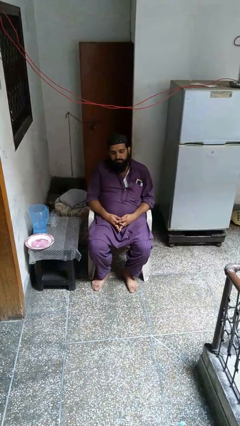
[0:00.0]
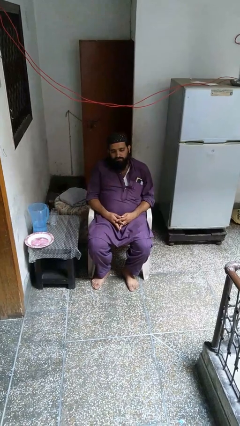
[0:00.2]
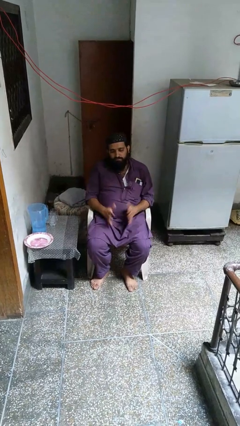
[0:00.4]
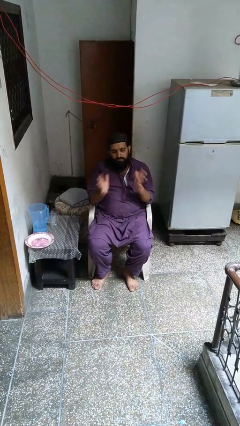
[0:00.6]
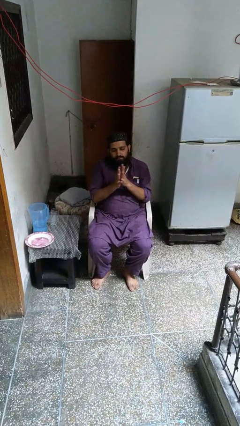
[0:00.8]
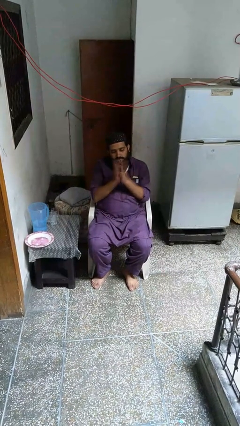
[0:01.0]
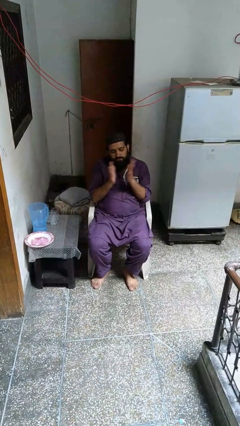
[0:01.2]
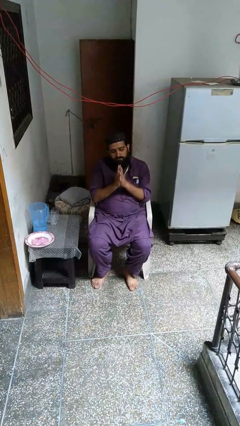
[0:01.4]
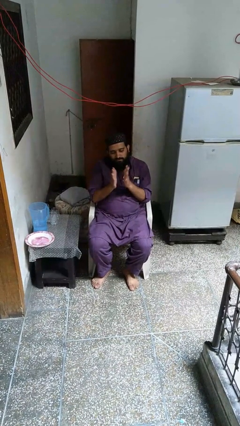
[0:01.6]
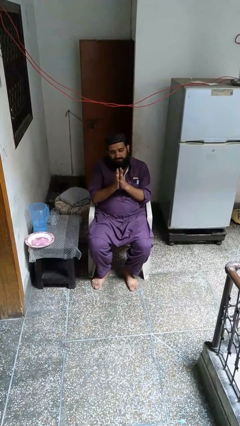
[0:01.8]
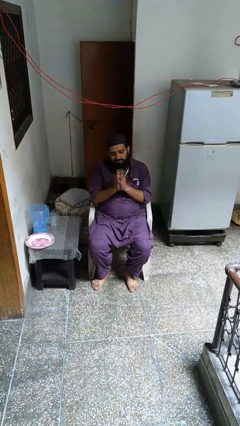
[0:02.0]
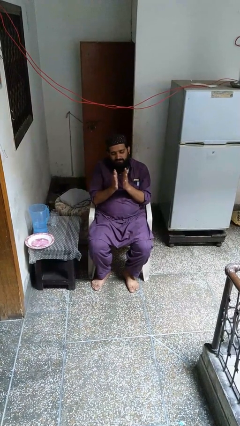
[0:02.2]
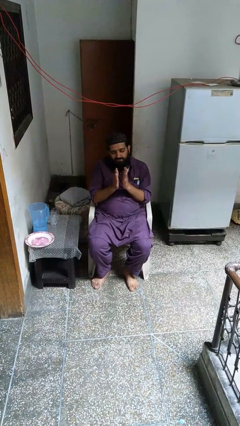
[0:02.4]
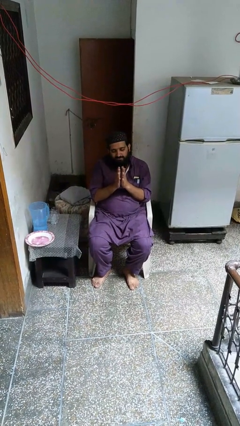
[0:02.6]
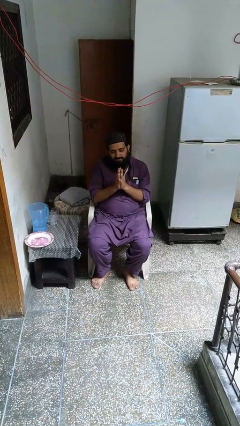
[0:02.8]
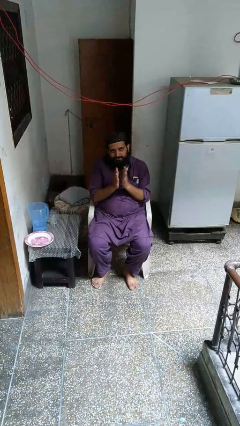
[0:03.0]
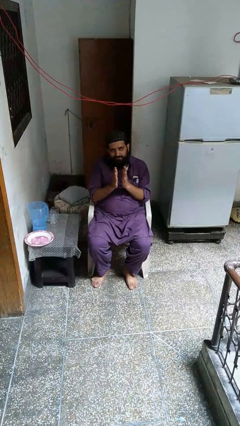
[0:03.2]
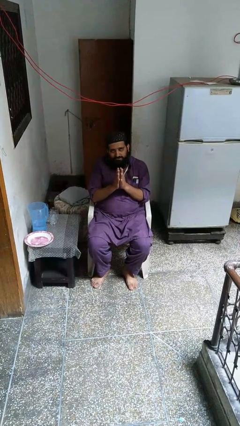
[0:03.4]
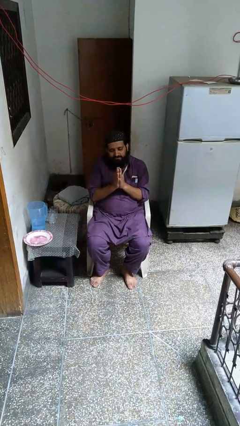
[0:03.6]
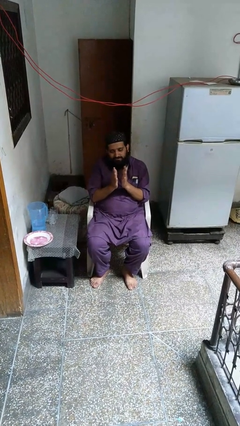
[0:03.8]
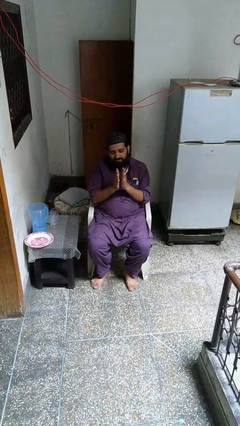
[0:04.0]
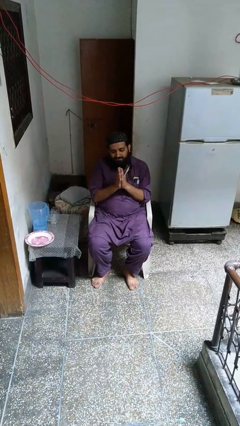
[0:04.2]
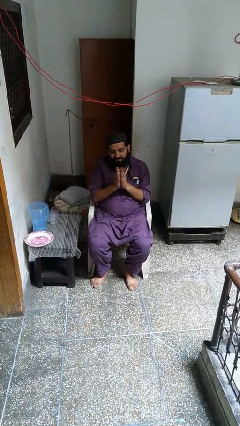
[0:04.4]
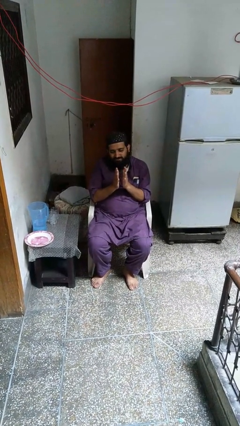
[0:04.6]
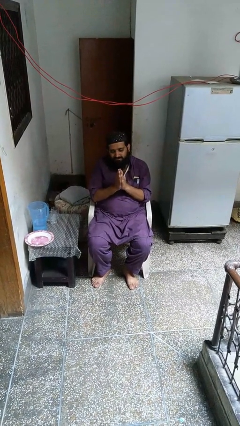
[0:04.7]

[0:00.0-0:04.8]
person claps hands

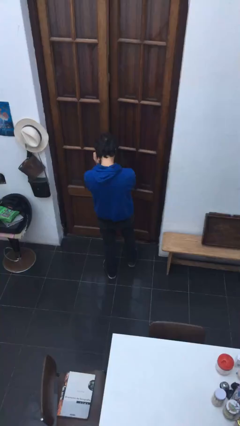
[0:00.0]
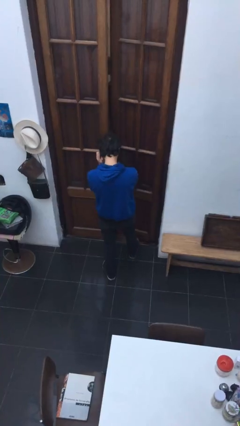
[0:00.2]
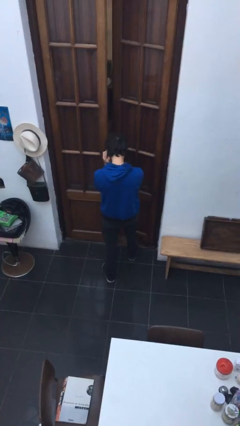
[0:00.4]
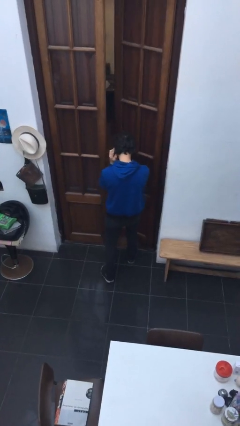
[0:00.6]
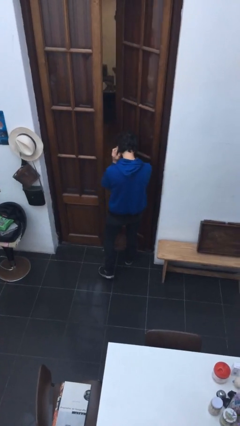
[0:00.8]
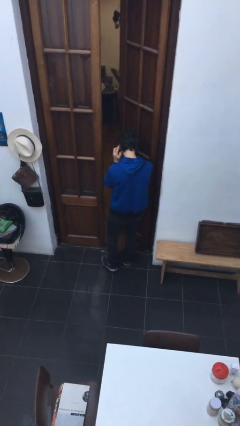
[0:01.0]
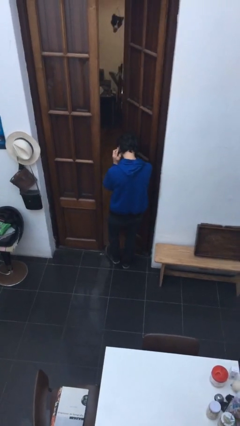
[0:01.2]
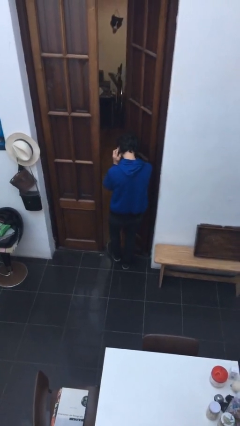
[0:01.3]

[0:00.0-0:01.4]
person opens facility door

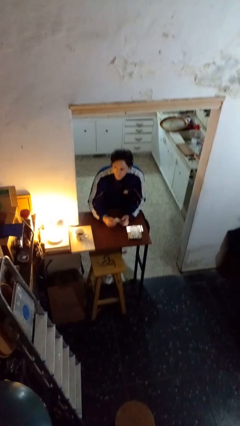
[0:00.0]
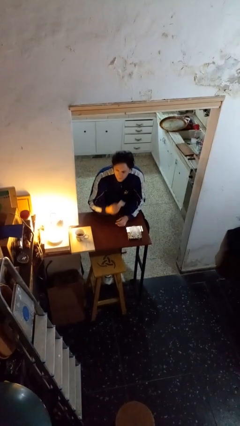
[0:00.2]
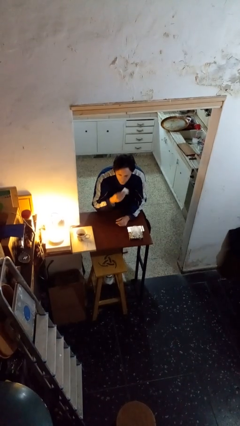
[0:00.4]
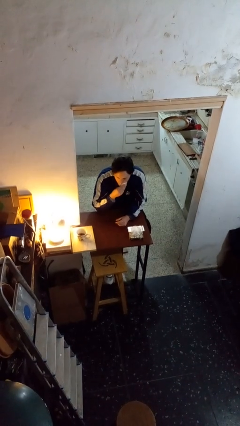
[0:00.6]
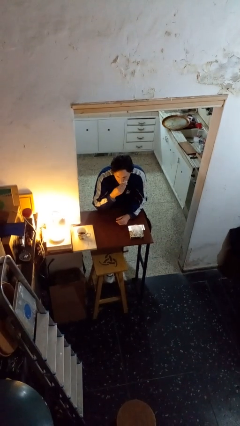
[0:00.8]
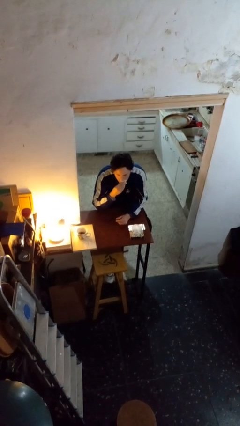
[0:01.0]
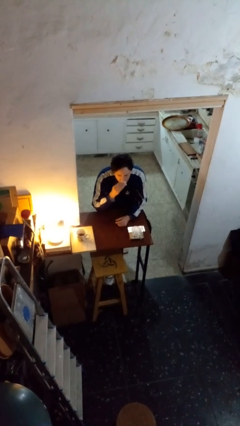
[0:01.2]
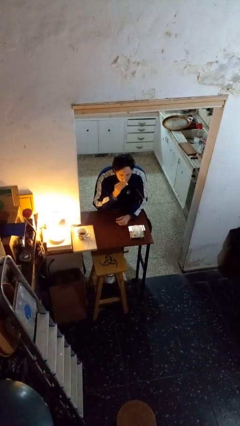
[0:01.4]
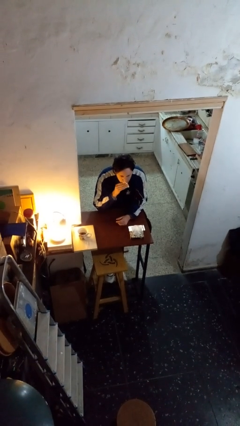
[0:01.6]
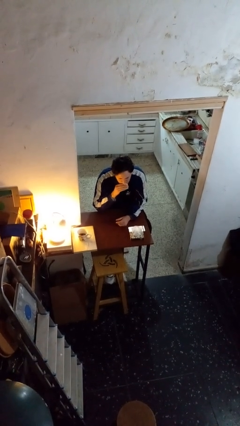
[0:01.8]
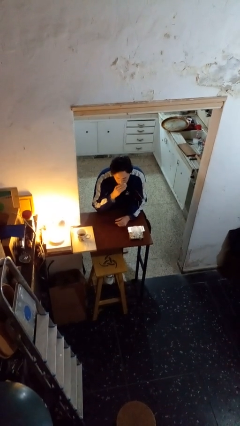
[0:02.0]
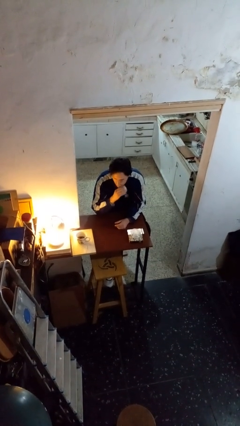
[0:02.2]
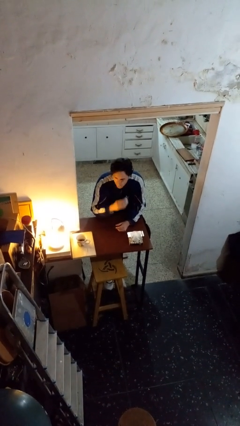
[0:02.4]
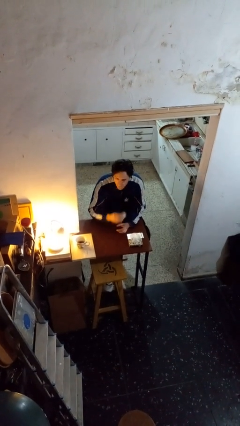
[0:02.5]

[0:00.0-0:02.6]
person wipes mouth with napkin

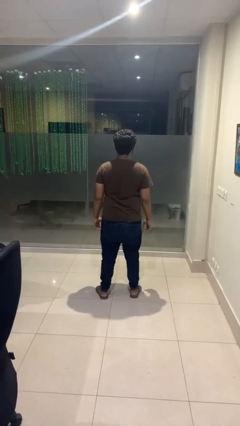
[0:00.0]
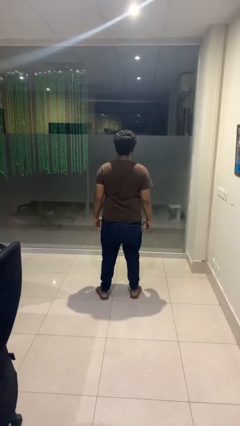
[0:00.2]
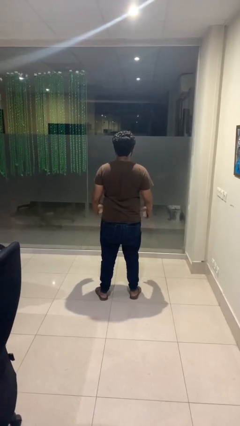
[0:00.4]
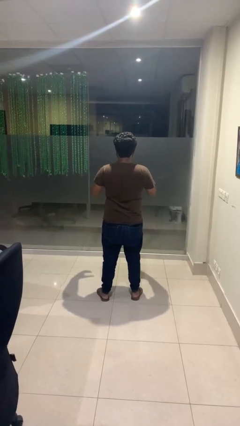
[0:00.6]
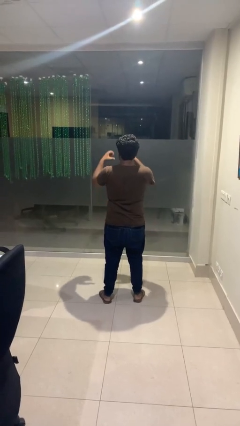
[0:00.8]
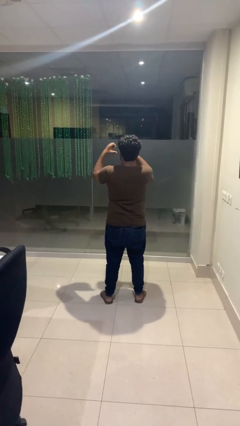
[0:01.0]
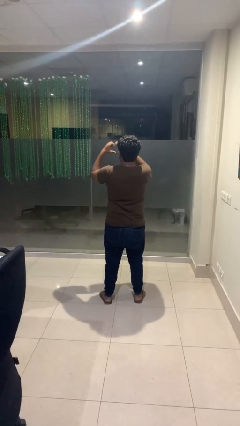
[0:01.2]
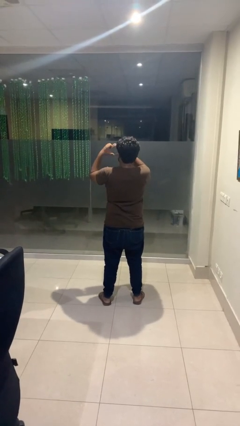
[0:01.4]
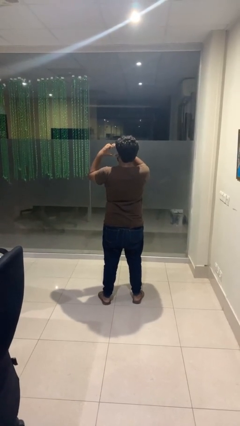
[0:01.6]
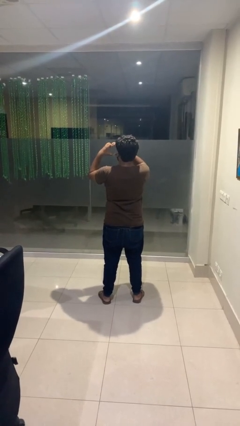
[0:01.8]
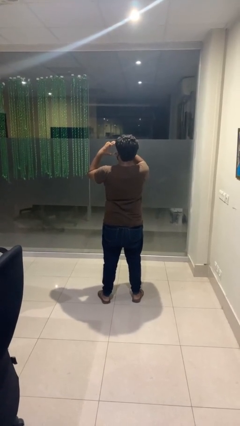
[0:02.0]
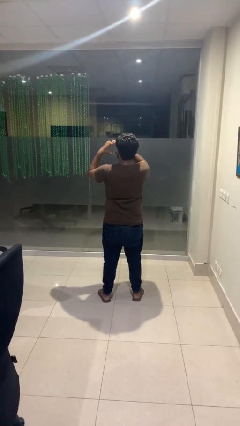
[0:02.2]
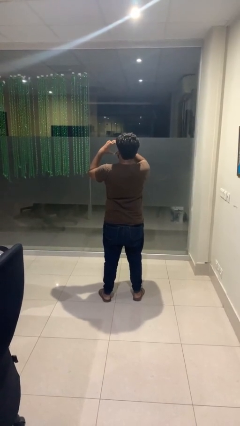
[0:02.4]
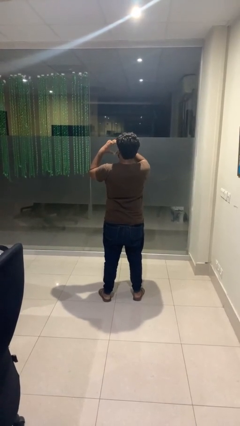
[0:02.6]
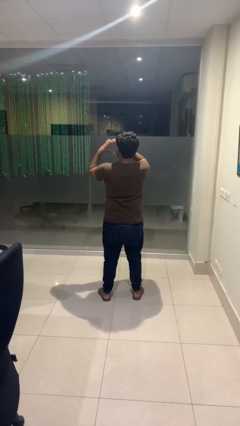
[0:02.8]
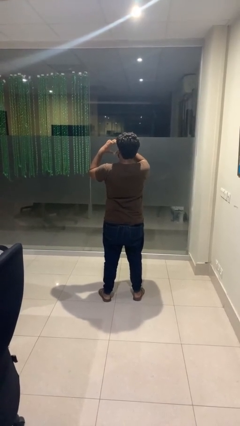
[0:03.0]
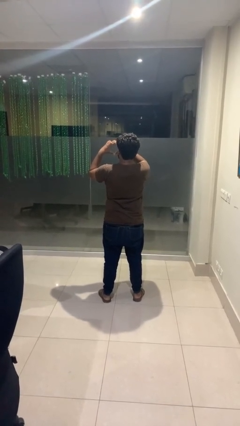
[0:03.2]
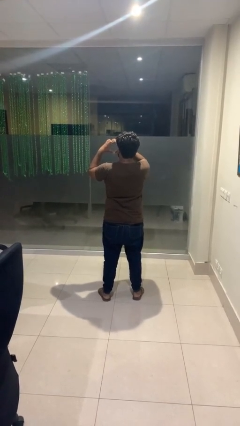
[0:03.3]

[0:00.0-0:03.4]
person gestures heart

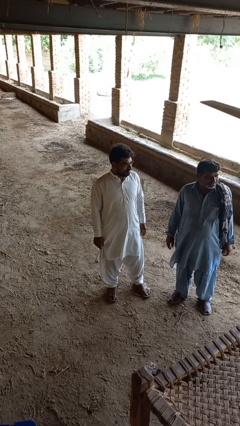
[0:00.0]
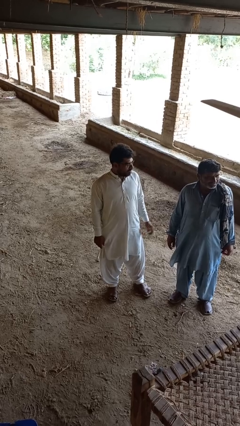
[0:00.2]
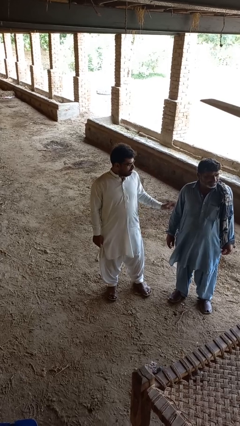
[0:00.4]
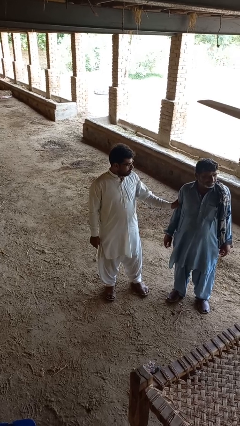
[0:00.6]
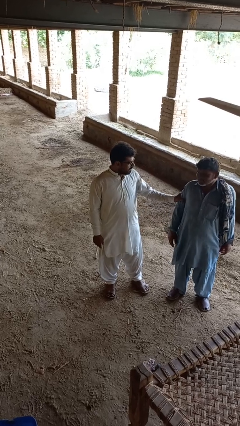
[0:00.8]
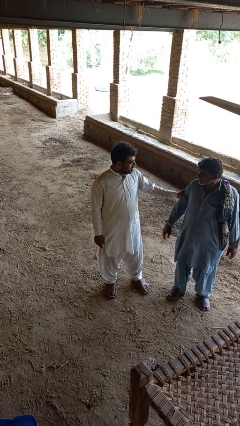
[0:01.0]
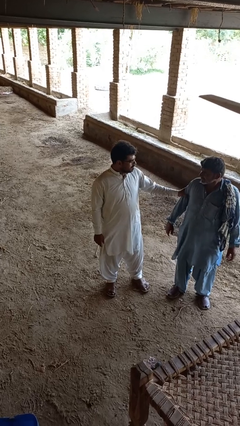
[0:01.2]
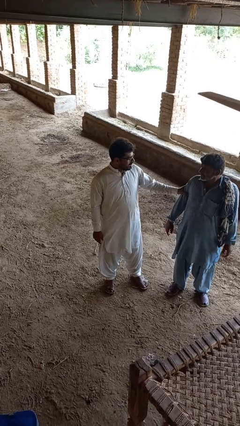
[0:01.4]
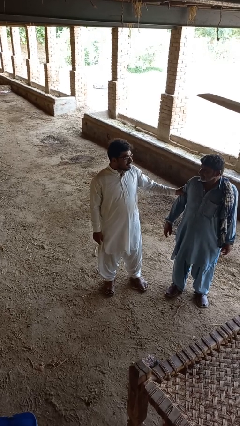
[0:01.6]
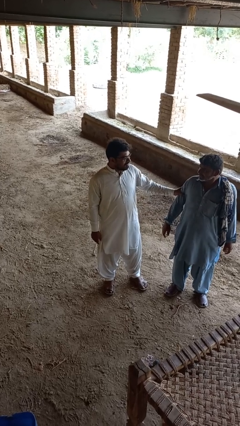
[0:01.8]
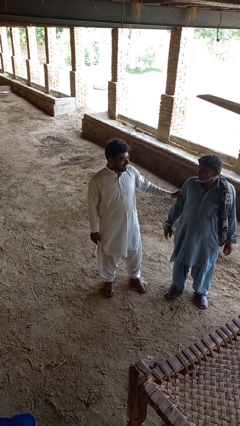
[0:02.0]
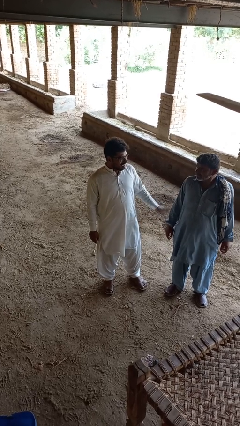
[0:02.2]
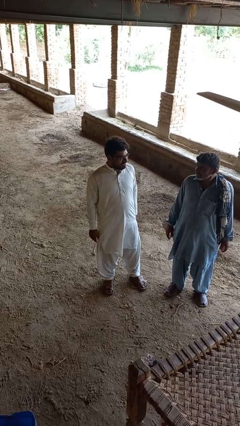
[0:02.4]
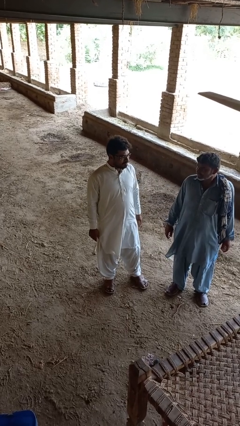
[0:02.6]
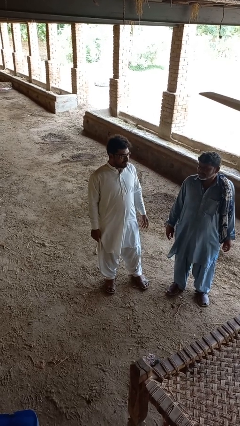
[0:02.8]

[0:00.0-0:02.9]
person grabs person by bicep

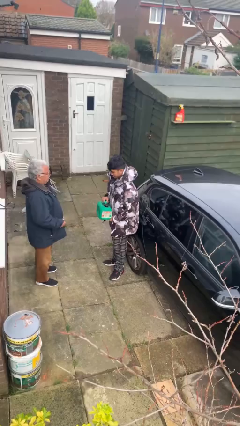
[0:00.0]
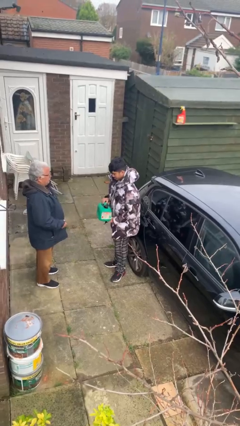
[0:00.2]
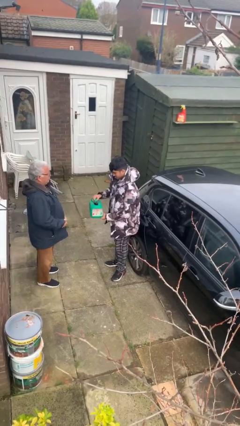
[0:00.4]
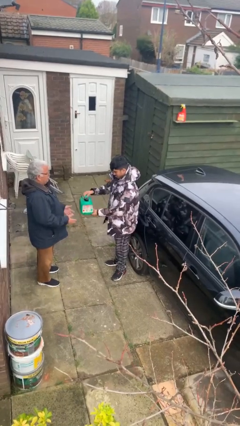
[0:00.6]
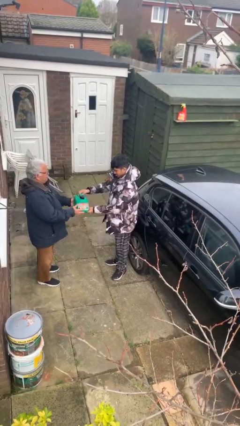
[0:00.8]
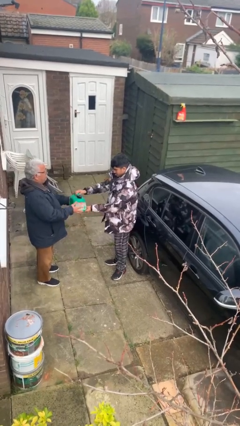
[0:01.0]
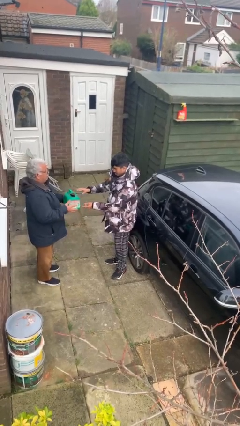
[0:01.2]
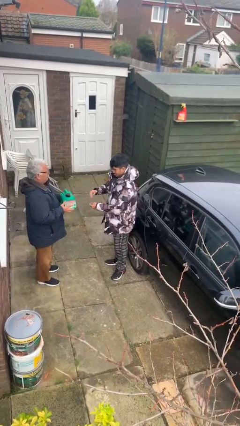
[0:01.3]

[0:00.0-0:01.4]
person transfers object to person

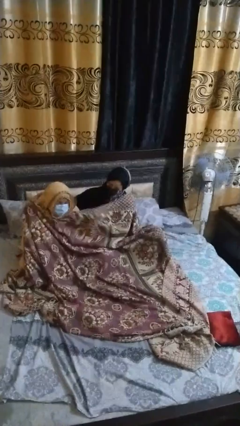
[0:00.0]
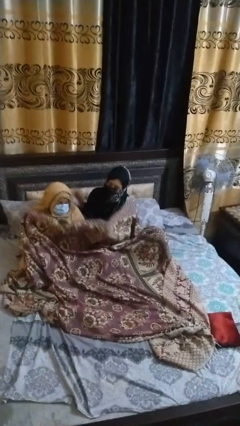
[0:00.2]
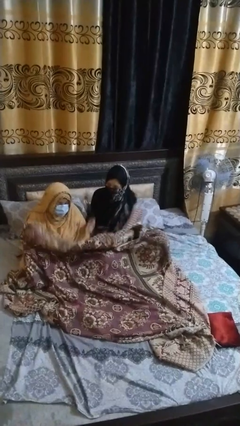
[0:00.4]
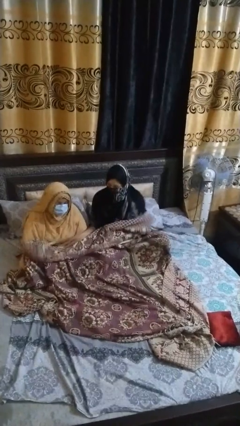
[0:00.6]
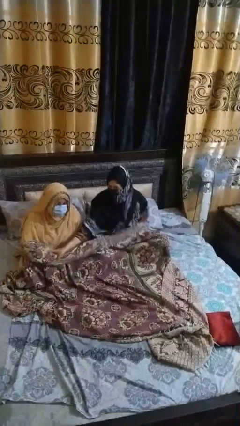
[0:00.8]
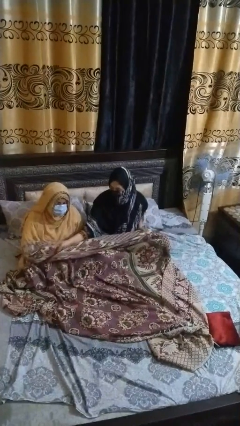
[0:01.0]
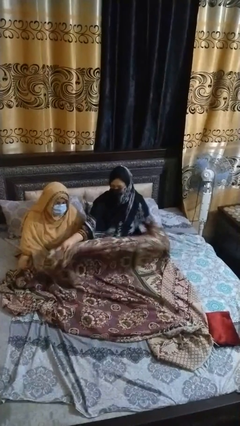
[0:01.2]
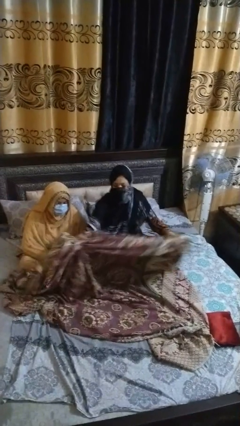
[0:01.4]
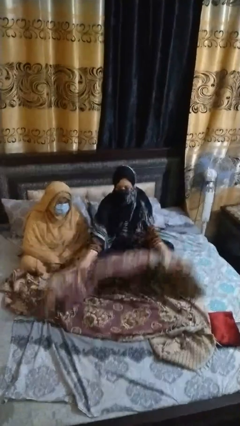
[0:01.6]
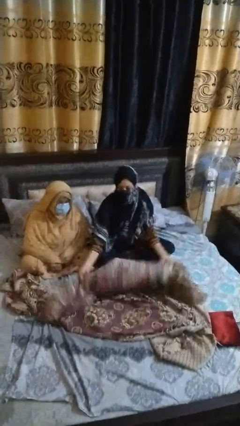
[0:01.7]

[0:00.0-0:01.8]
person uncovers friend with blanket
